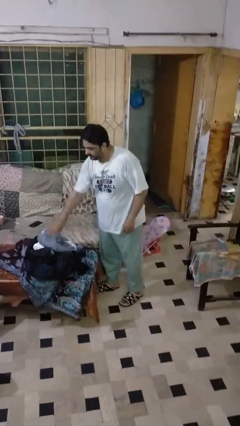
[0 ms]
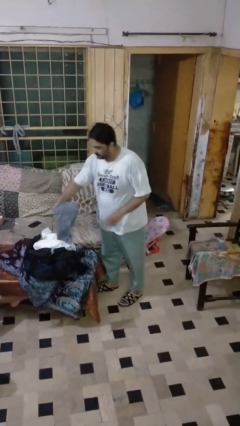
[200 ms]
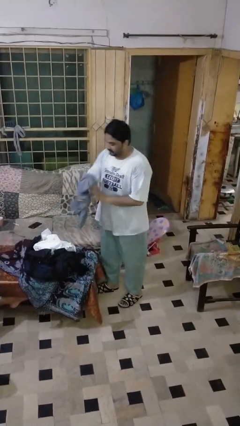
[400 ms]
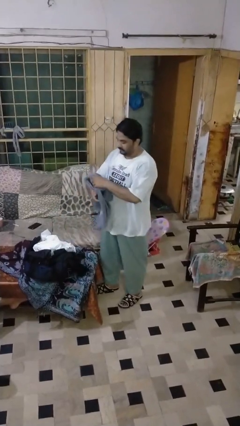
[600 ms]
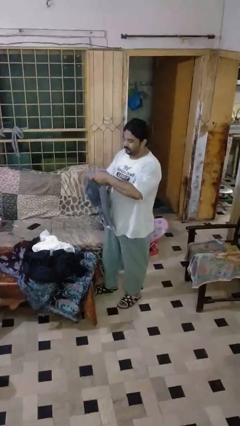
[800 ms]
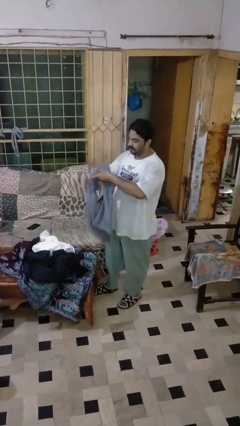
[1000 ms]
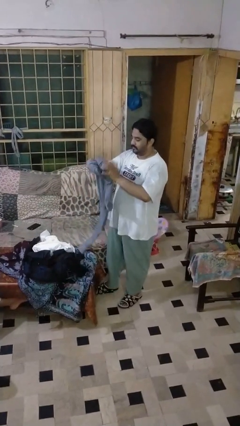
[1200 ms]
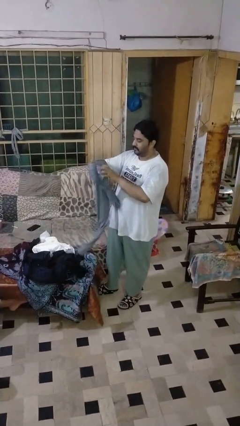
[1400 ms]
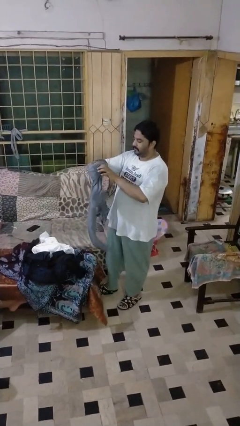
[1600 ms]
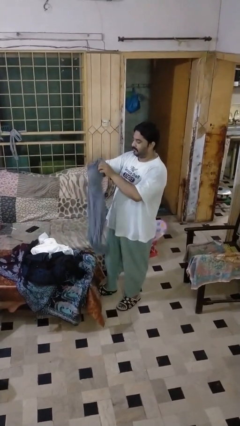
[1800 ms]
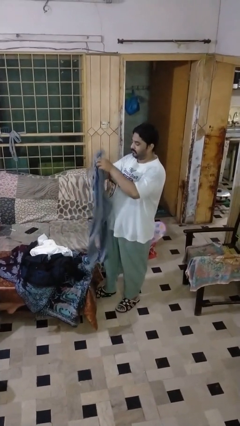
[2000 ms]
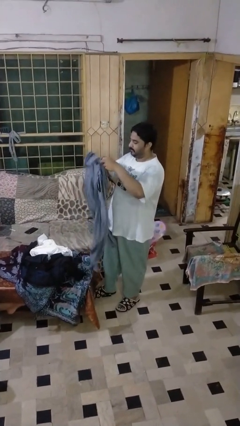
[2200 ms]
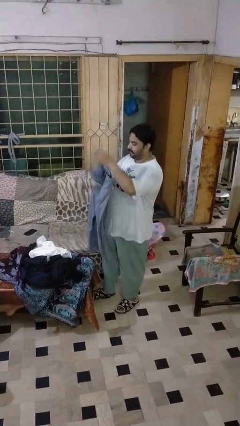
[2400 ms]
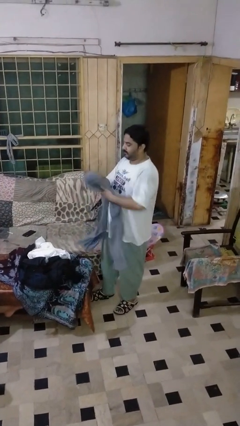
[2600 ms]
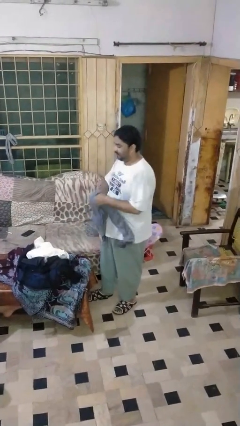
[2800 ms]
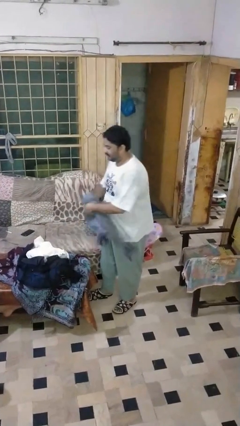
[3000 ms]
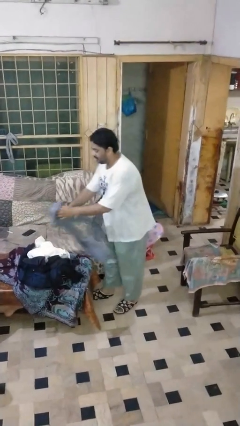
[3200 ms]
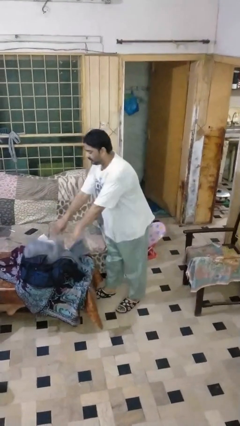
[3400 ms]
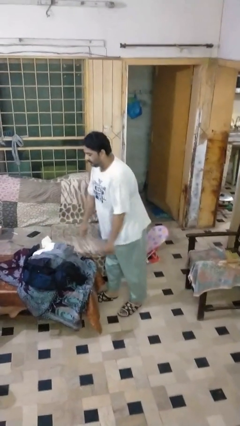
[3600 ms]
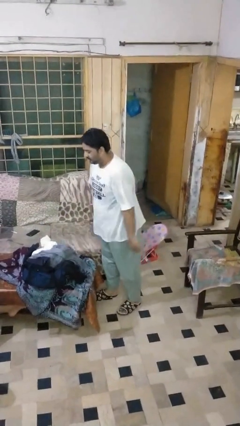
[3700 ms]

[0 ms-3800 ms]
person folds pants

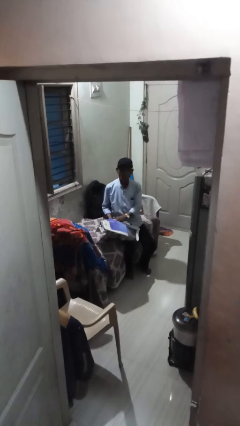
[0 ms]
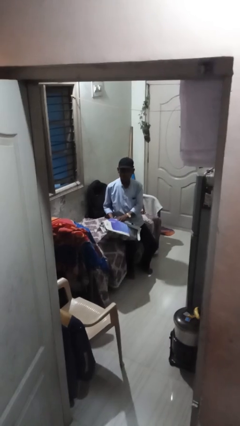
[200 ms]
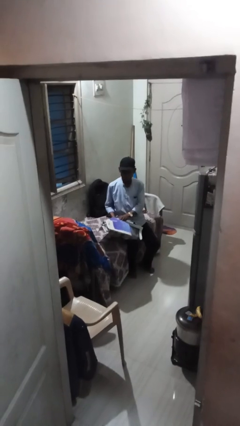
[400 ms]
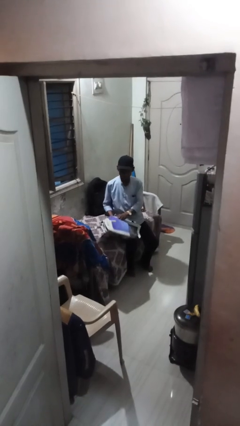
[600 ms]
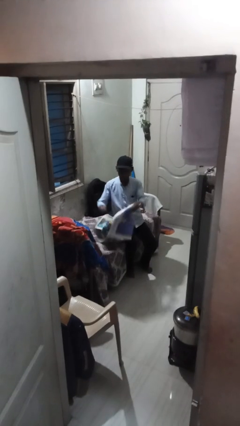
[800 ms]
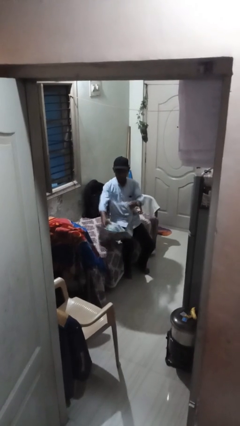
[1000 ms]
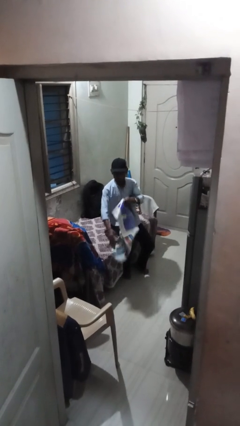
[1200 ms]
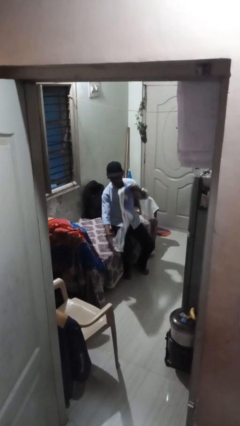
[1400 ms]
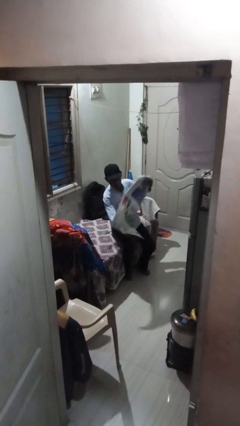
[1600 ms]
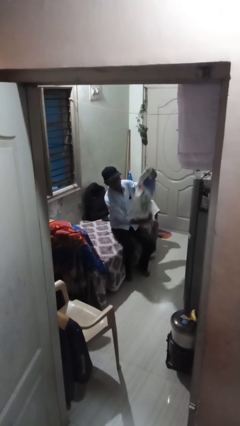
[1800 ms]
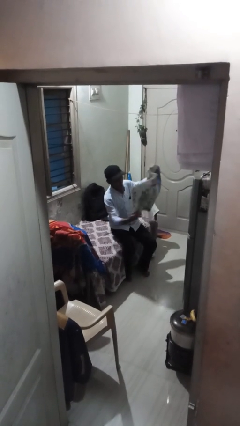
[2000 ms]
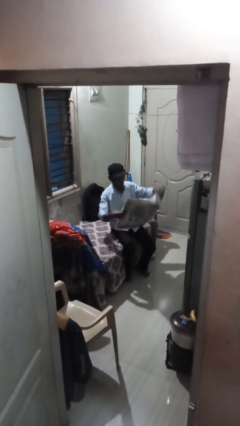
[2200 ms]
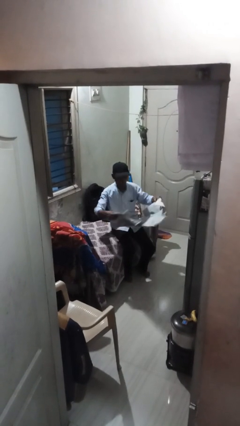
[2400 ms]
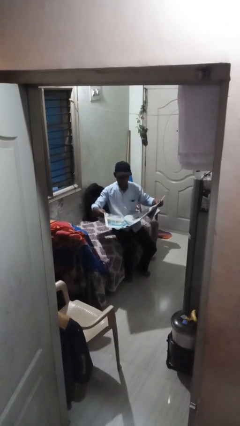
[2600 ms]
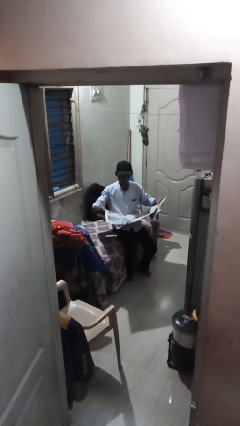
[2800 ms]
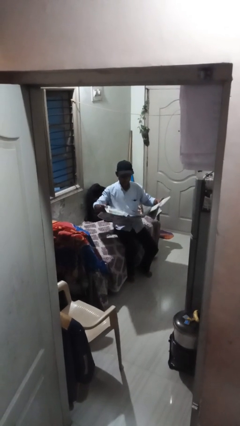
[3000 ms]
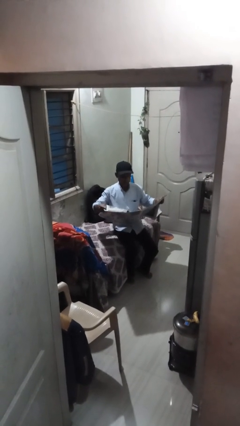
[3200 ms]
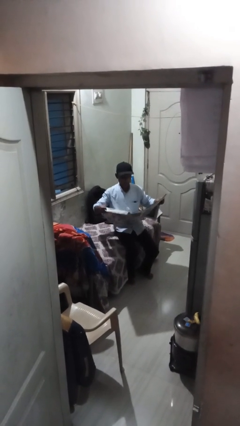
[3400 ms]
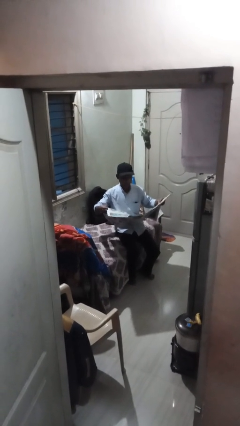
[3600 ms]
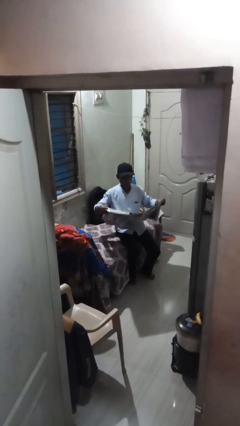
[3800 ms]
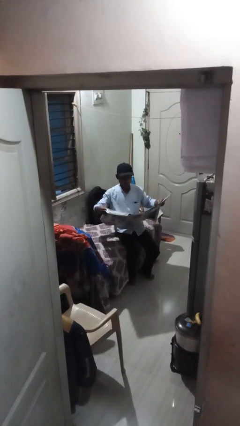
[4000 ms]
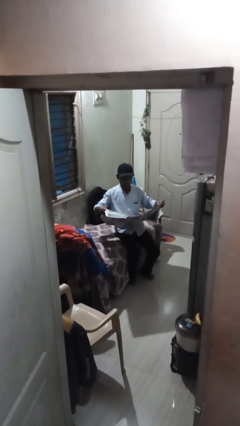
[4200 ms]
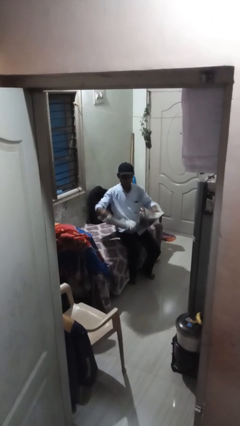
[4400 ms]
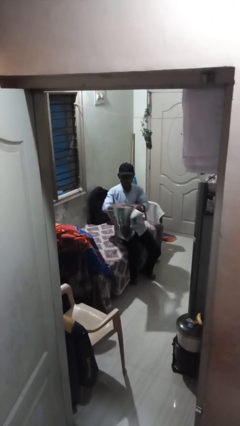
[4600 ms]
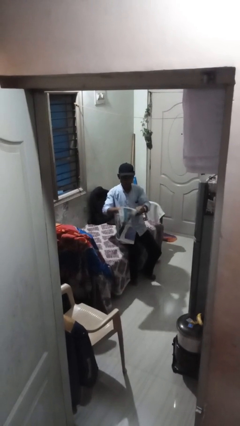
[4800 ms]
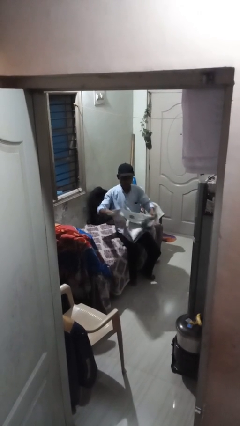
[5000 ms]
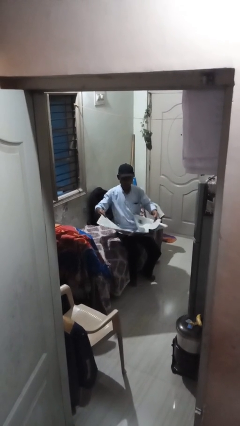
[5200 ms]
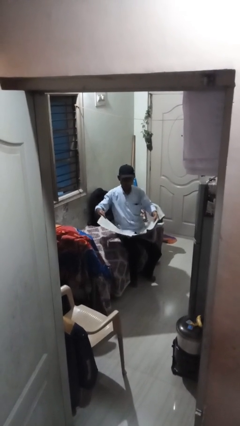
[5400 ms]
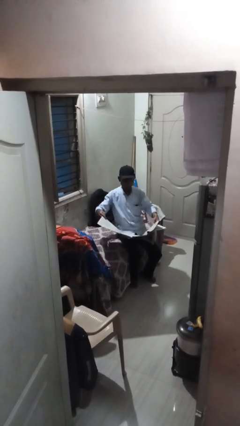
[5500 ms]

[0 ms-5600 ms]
person reads newspaper

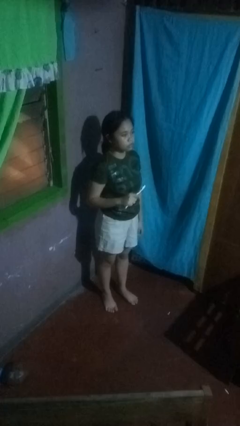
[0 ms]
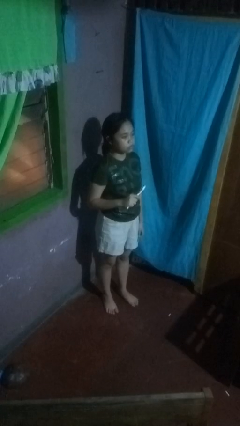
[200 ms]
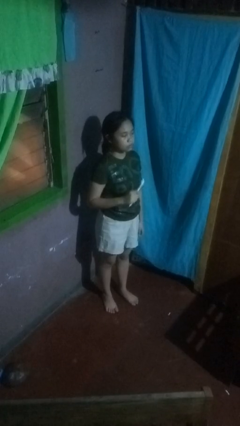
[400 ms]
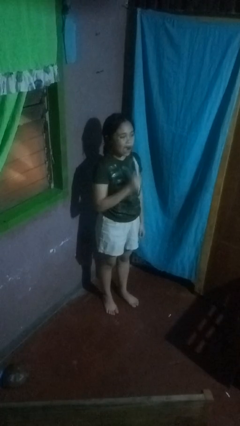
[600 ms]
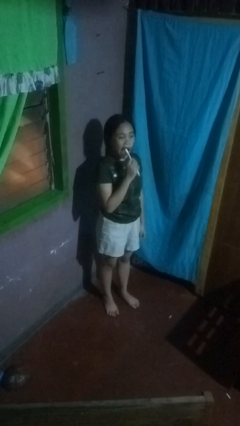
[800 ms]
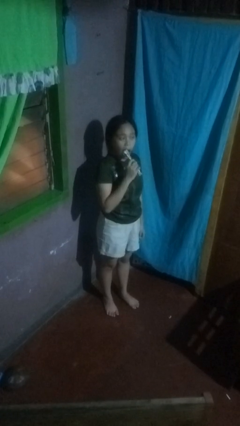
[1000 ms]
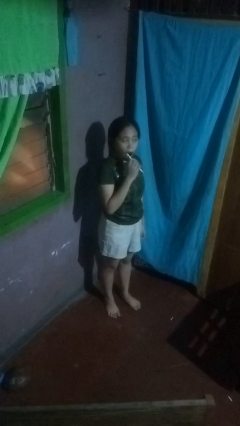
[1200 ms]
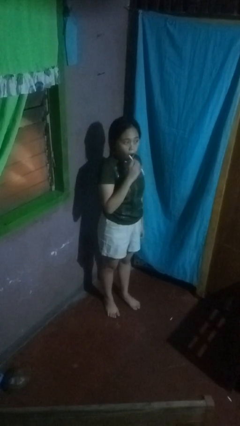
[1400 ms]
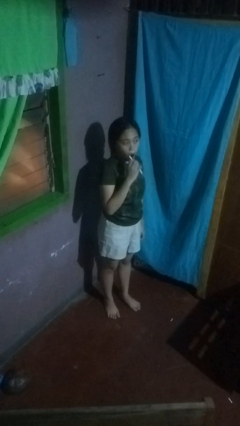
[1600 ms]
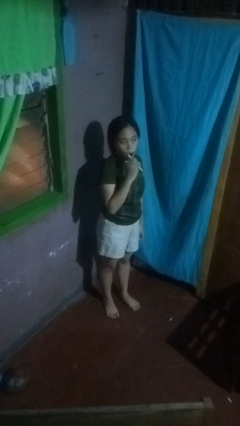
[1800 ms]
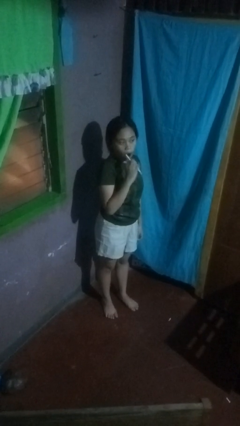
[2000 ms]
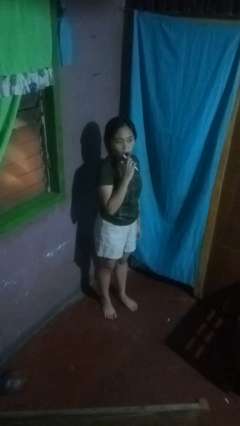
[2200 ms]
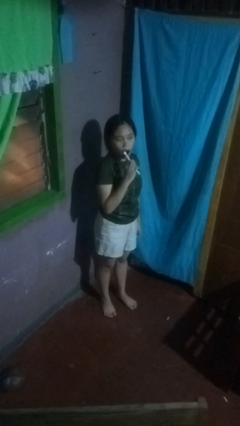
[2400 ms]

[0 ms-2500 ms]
person brushes teeth

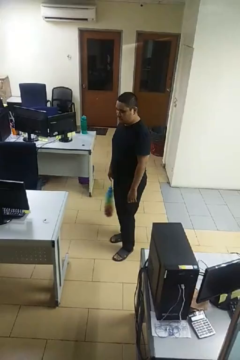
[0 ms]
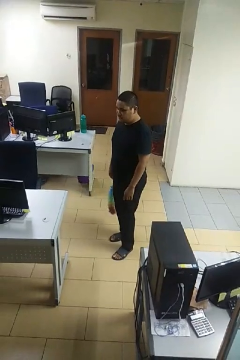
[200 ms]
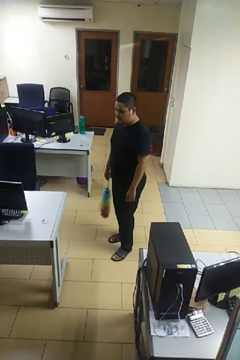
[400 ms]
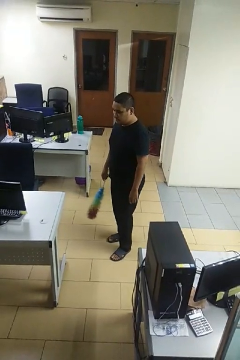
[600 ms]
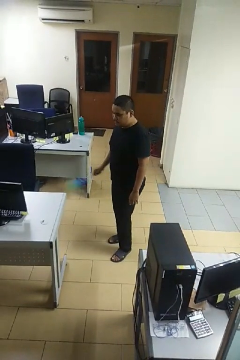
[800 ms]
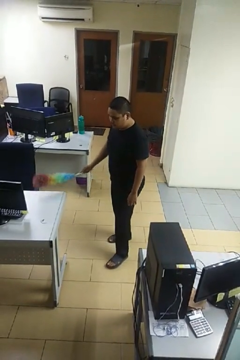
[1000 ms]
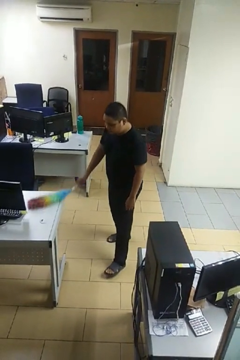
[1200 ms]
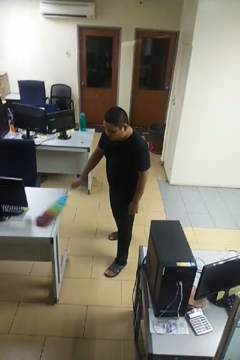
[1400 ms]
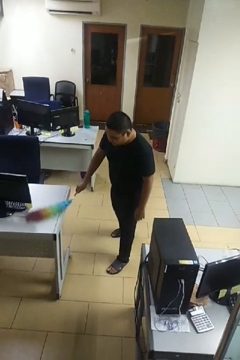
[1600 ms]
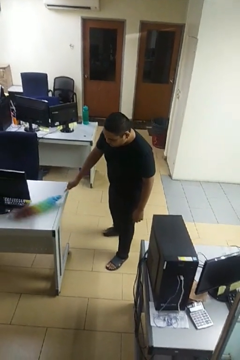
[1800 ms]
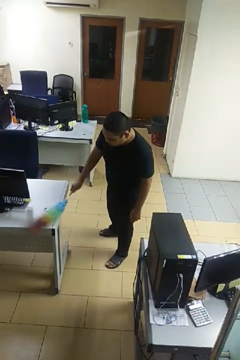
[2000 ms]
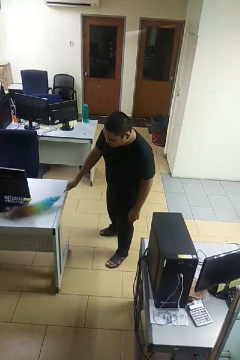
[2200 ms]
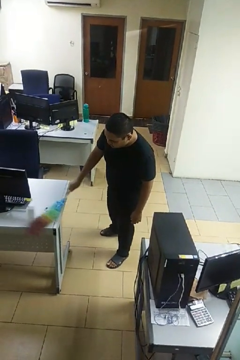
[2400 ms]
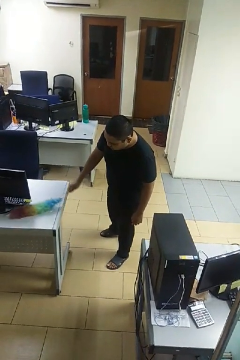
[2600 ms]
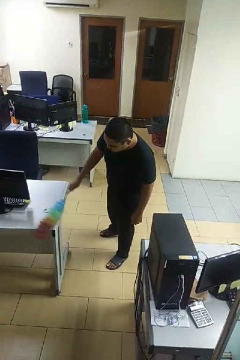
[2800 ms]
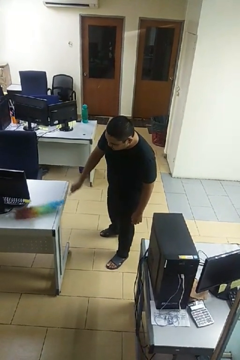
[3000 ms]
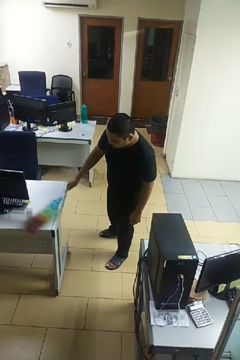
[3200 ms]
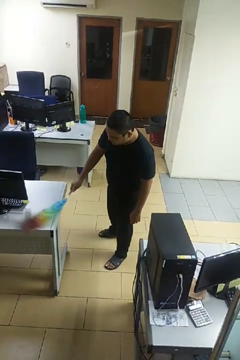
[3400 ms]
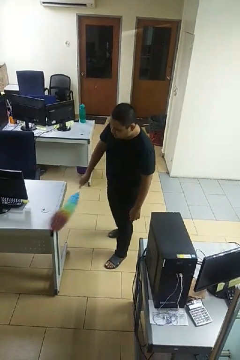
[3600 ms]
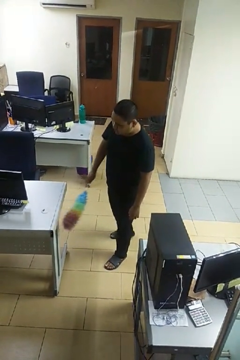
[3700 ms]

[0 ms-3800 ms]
person dusts furniture

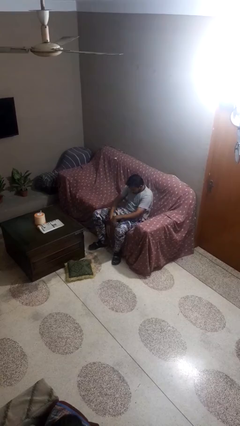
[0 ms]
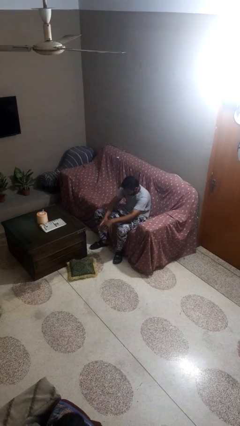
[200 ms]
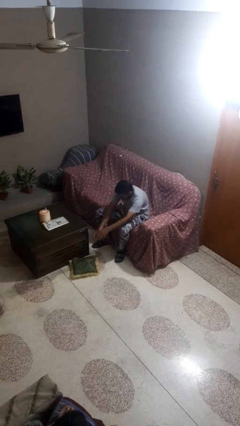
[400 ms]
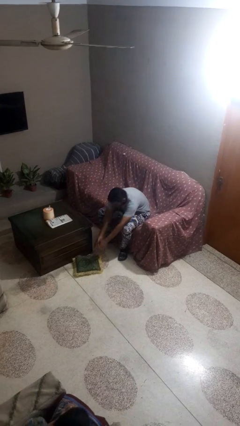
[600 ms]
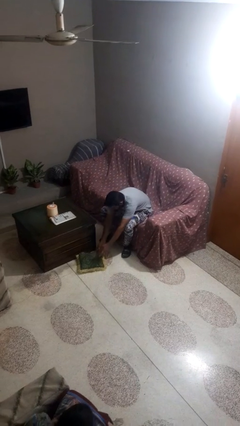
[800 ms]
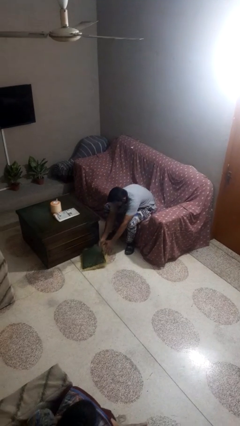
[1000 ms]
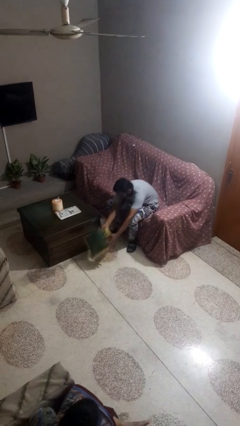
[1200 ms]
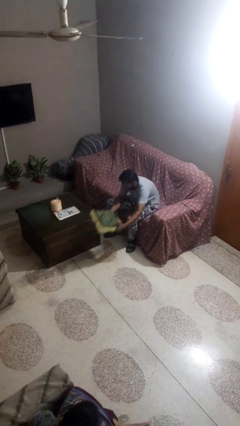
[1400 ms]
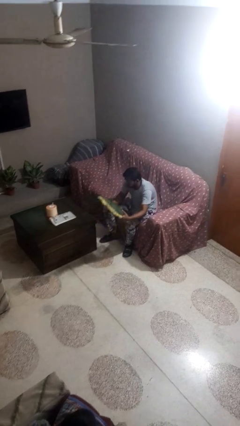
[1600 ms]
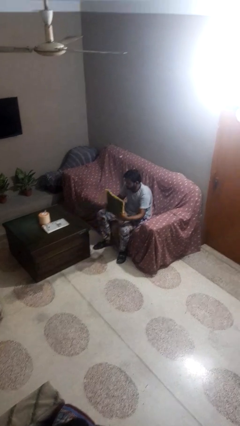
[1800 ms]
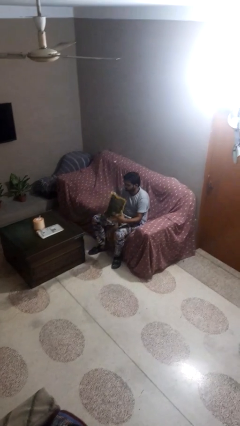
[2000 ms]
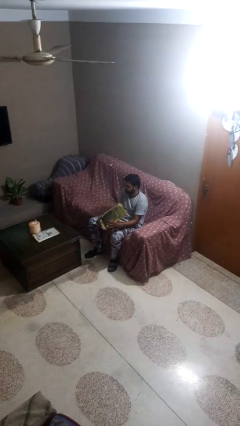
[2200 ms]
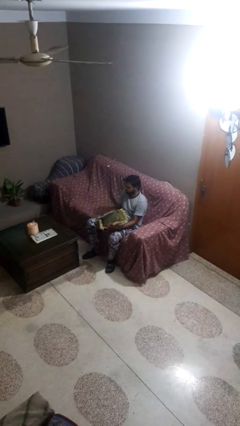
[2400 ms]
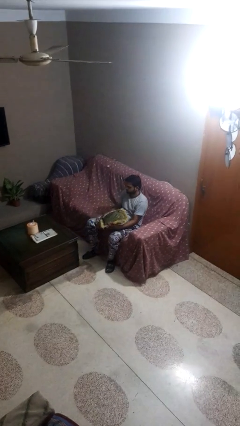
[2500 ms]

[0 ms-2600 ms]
person picks up object from floor
